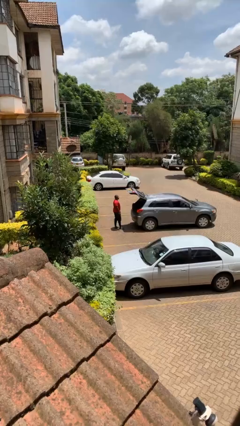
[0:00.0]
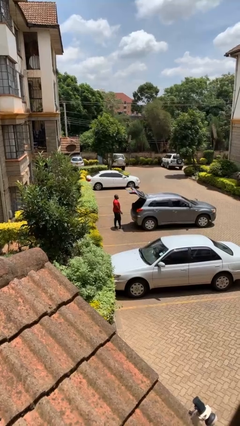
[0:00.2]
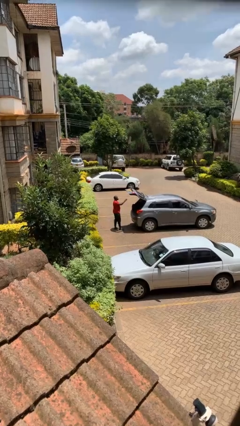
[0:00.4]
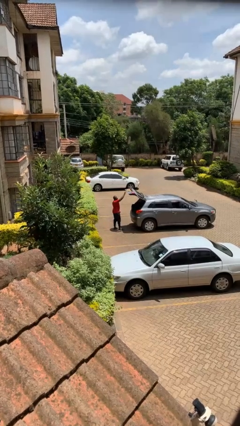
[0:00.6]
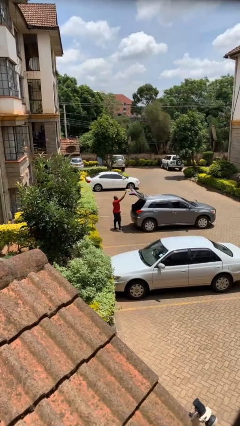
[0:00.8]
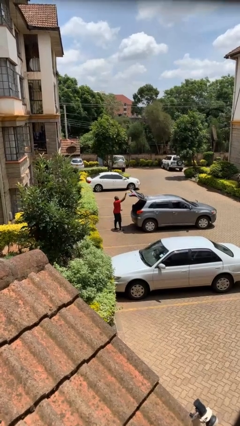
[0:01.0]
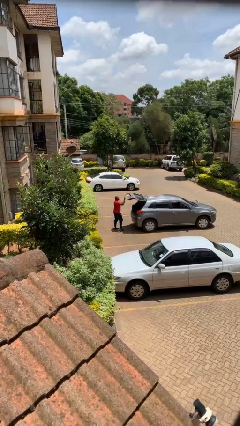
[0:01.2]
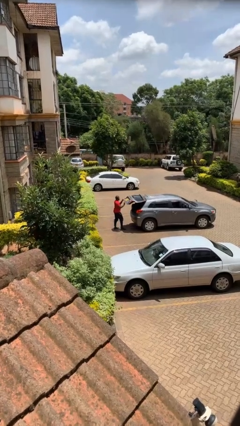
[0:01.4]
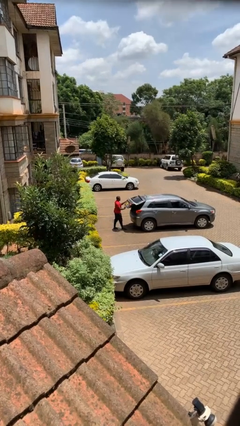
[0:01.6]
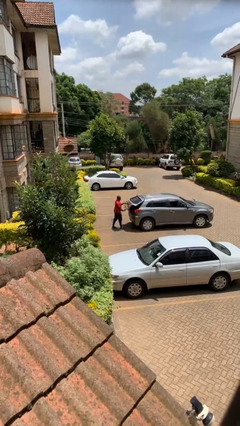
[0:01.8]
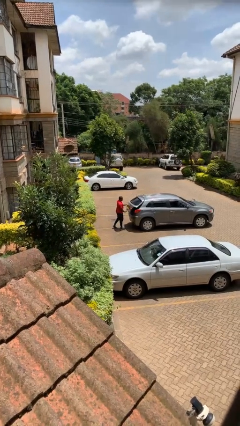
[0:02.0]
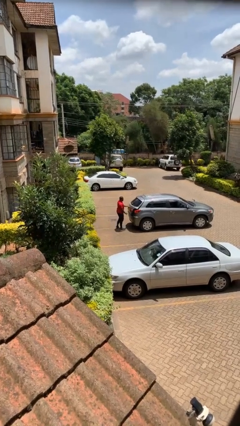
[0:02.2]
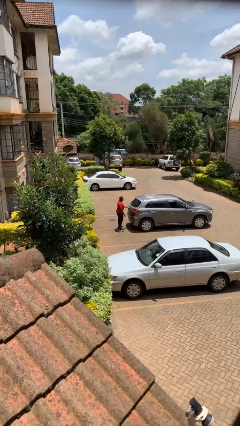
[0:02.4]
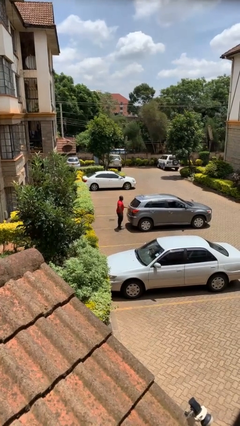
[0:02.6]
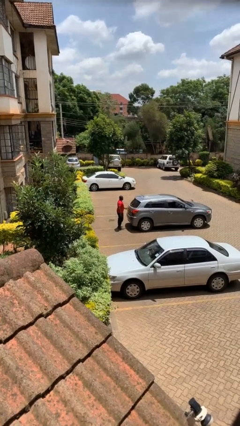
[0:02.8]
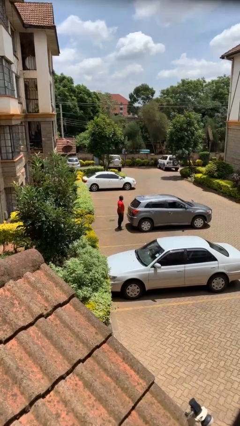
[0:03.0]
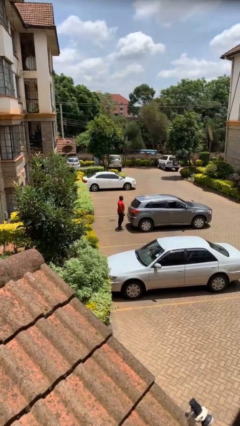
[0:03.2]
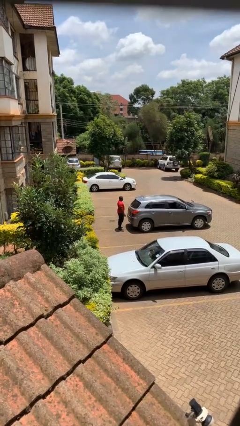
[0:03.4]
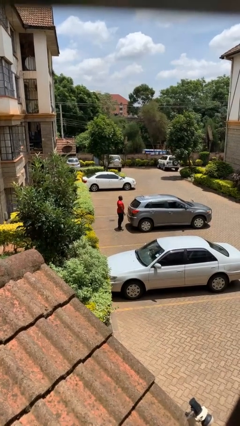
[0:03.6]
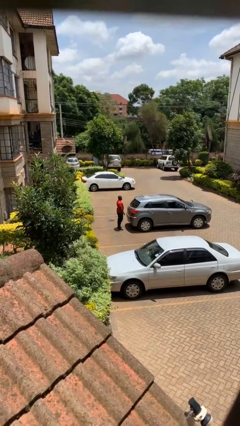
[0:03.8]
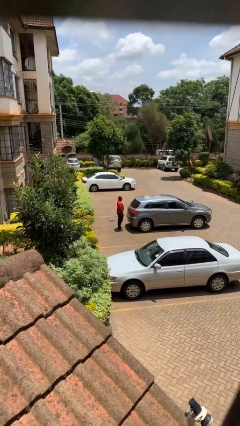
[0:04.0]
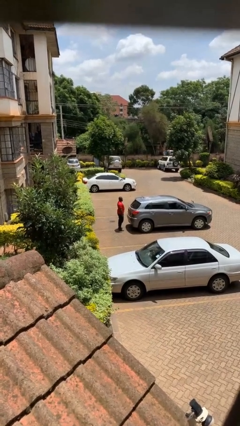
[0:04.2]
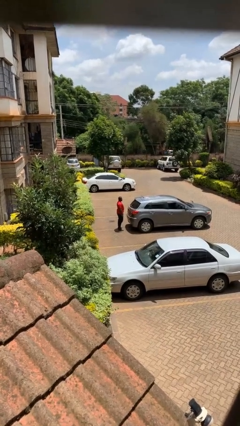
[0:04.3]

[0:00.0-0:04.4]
person closes car trunk

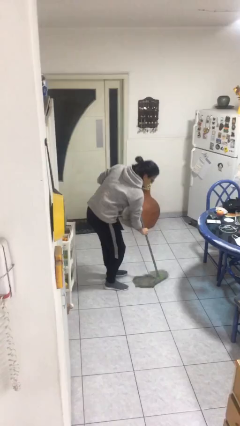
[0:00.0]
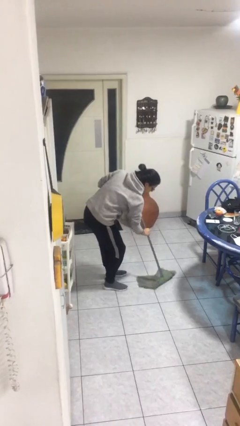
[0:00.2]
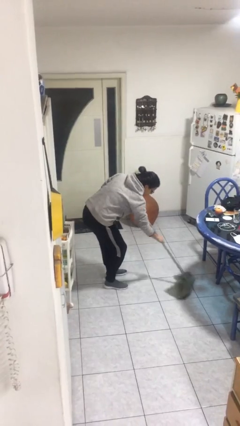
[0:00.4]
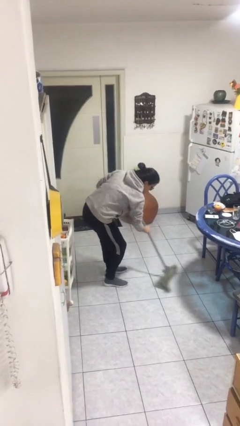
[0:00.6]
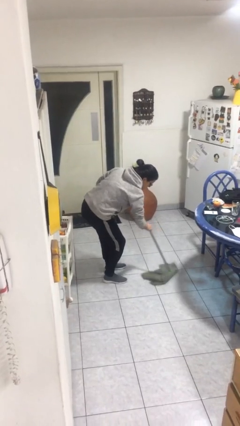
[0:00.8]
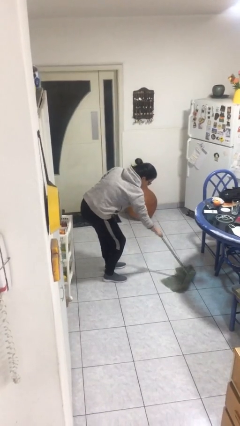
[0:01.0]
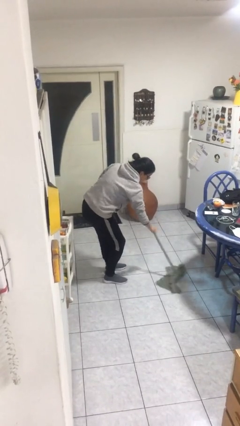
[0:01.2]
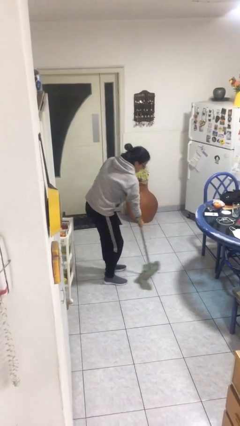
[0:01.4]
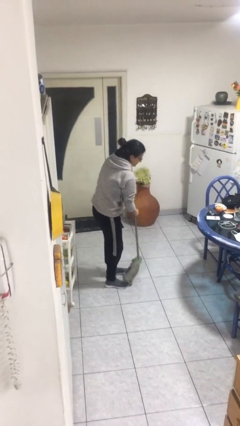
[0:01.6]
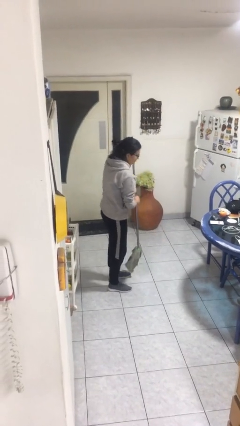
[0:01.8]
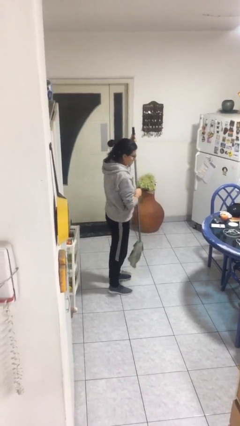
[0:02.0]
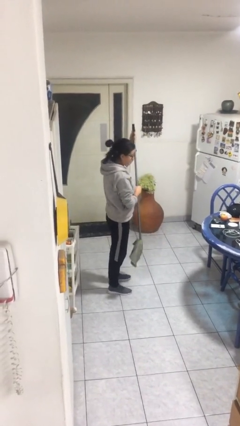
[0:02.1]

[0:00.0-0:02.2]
person sweeps floor

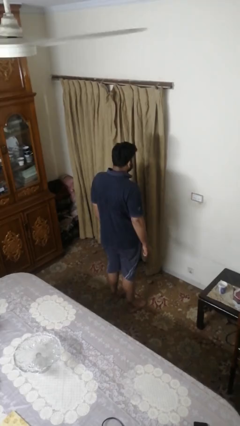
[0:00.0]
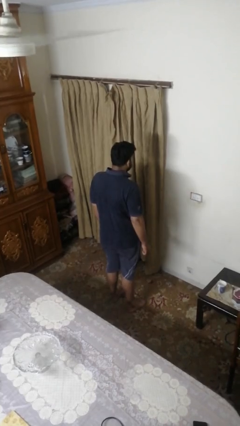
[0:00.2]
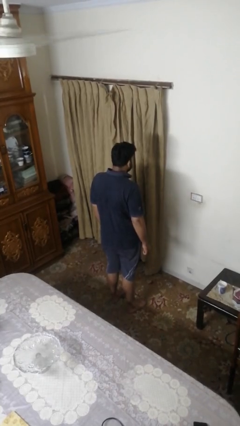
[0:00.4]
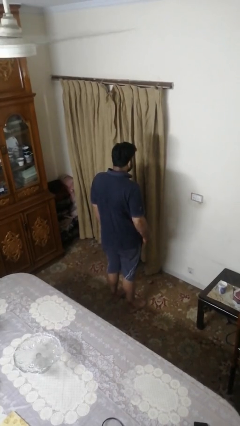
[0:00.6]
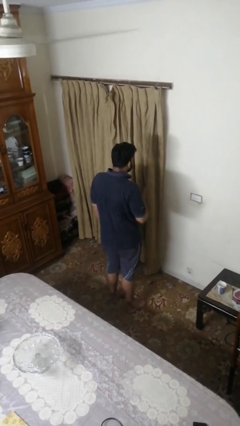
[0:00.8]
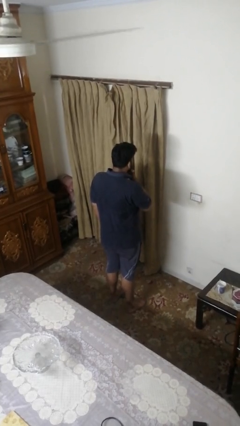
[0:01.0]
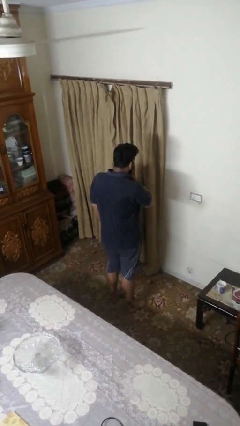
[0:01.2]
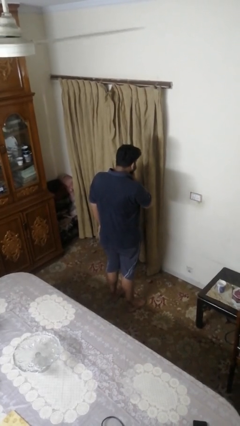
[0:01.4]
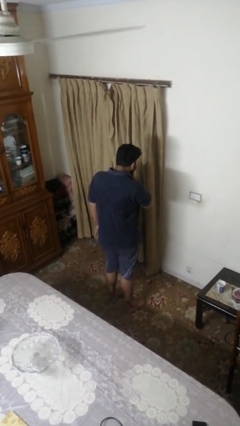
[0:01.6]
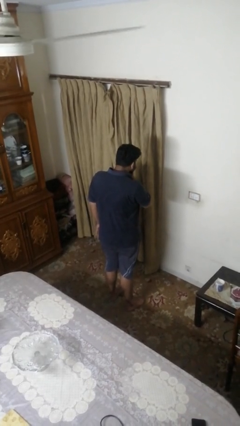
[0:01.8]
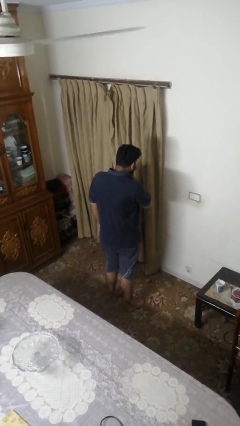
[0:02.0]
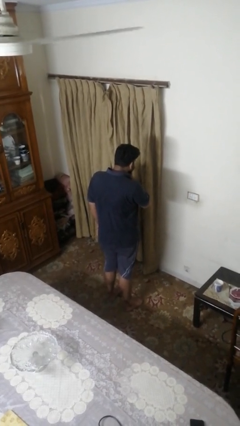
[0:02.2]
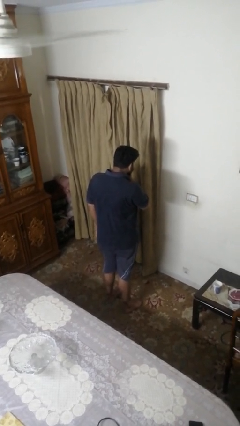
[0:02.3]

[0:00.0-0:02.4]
person strokes chin

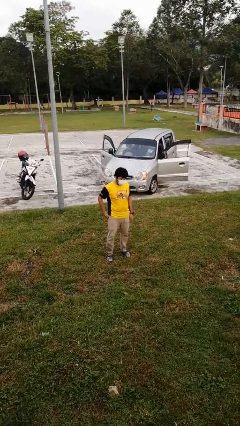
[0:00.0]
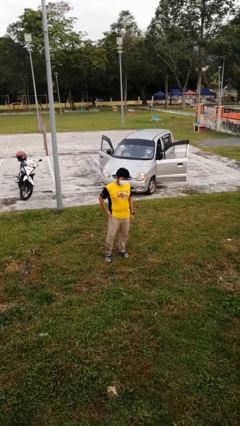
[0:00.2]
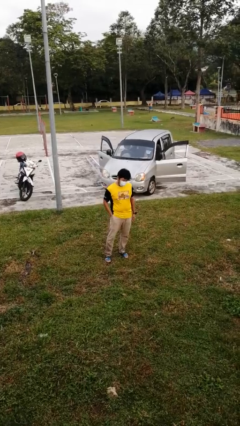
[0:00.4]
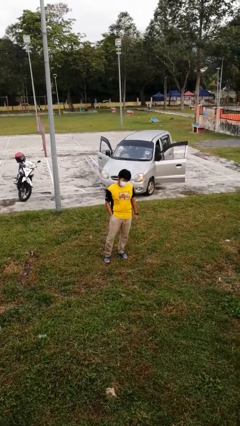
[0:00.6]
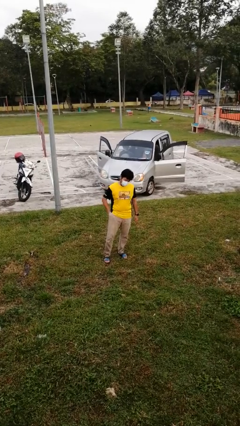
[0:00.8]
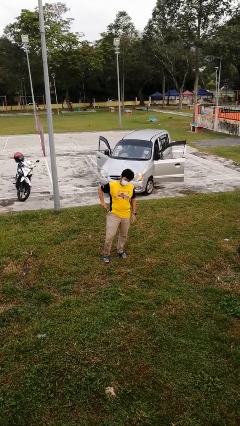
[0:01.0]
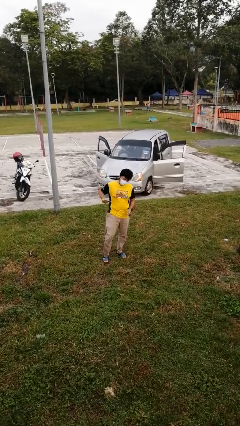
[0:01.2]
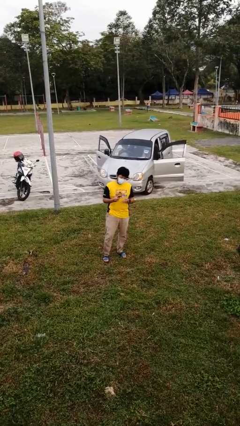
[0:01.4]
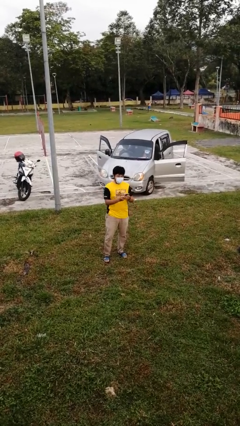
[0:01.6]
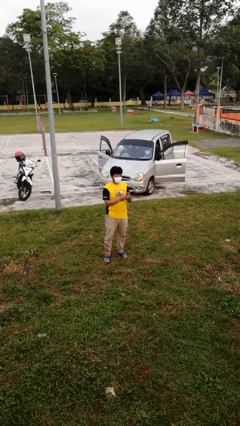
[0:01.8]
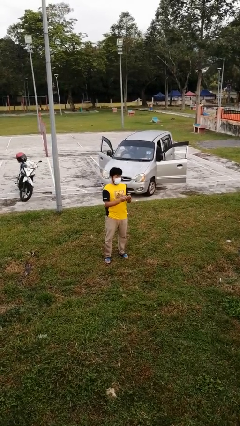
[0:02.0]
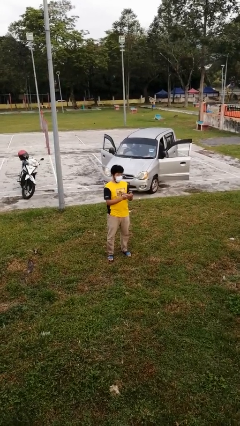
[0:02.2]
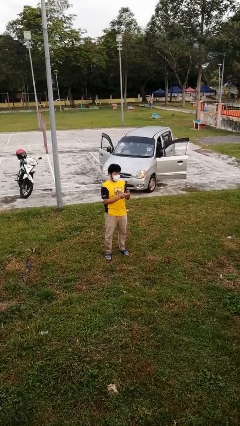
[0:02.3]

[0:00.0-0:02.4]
person takes phone from pocket

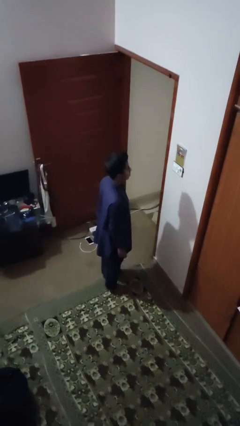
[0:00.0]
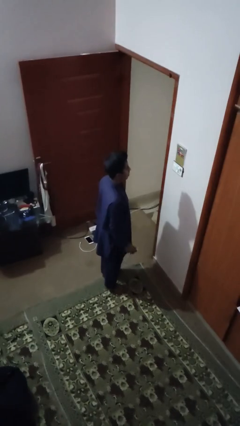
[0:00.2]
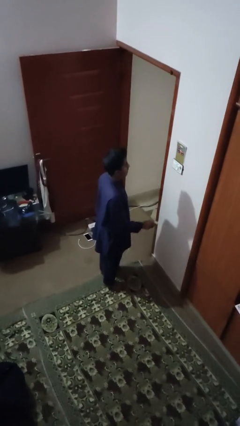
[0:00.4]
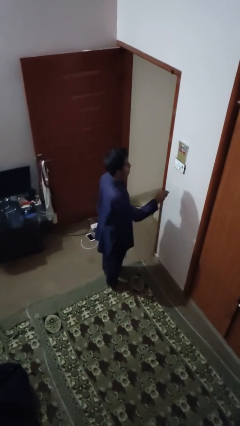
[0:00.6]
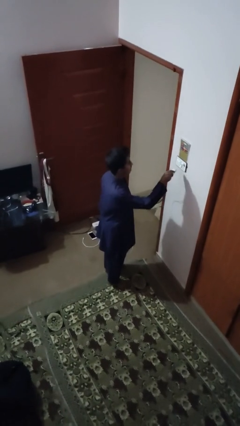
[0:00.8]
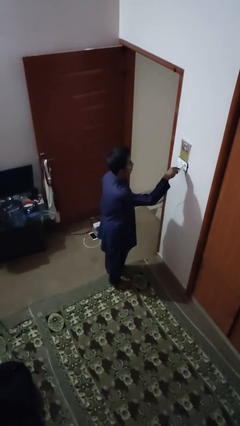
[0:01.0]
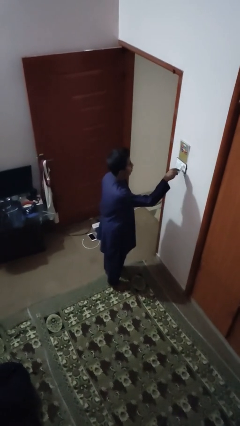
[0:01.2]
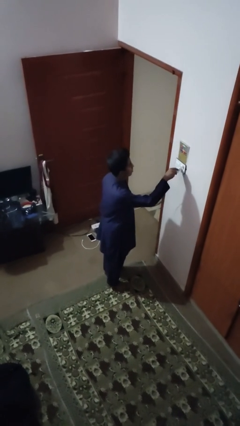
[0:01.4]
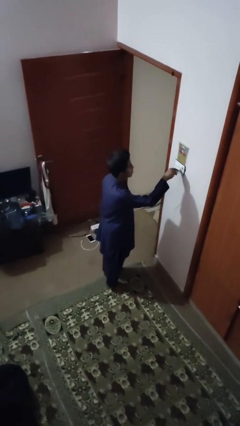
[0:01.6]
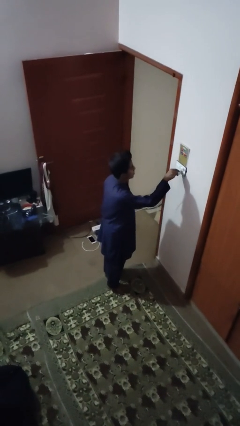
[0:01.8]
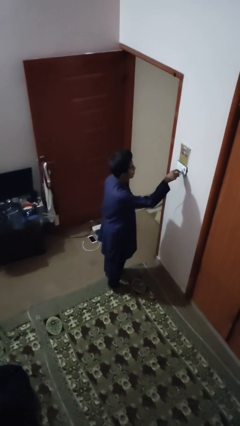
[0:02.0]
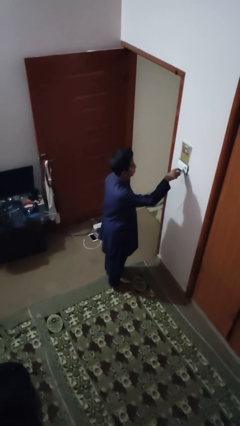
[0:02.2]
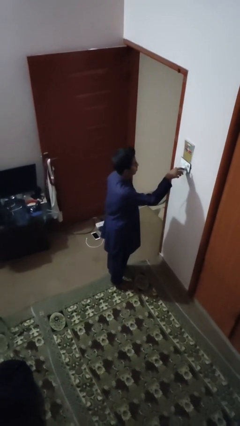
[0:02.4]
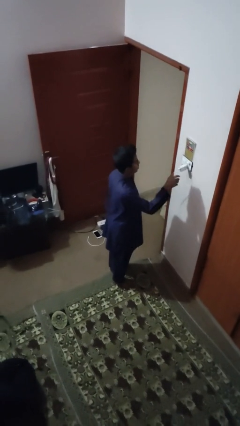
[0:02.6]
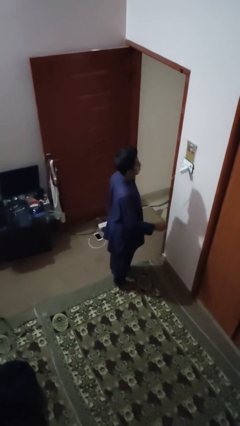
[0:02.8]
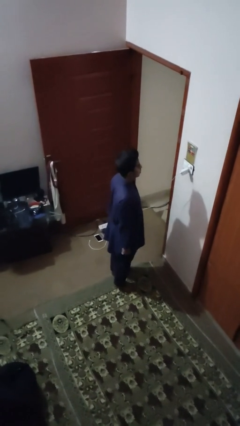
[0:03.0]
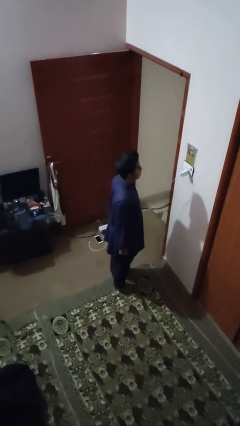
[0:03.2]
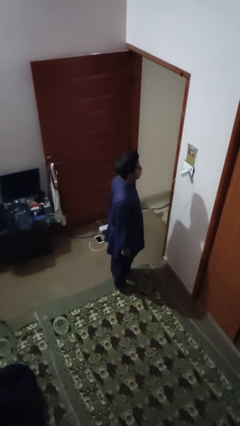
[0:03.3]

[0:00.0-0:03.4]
person plugs into electrical socket

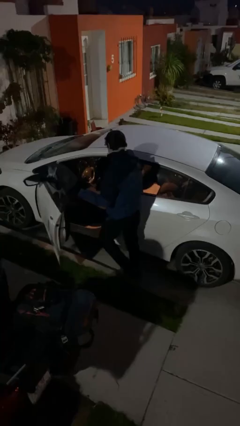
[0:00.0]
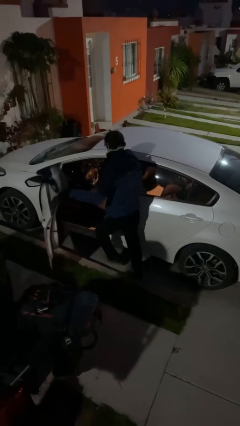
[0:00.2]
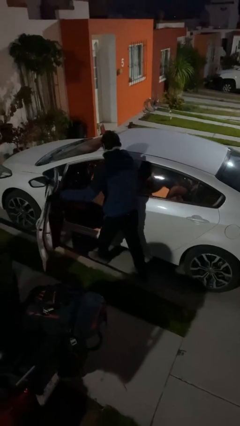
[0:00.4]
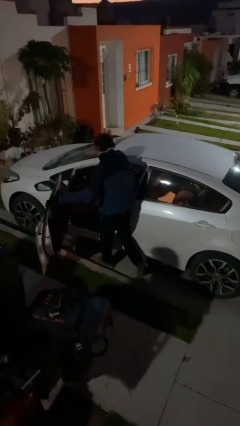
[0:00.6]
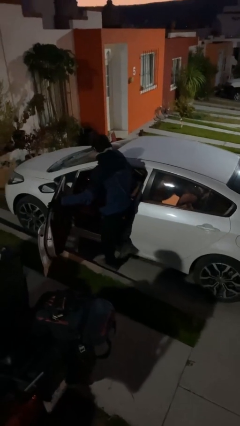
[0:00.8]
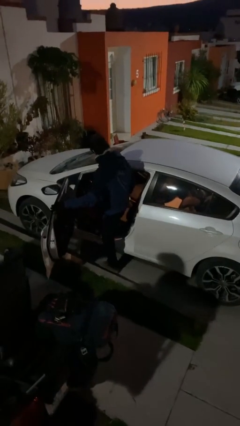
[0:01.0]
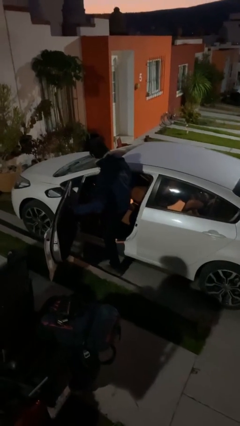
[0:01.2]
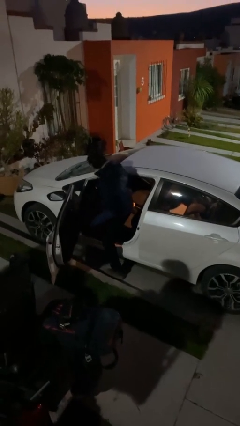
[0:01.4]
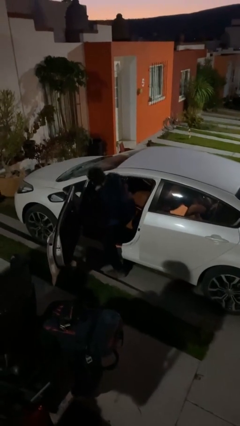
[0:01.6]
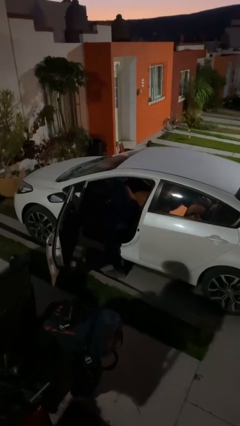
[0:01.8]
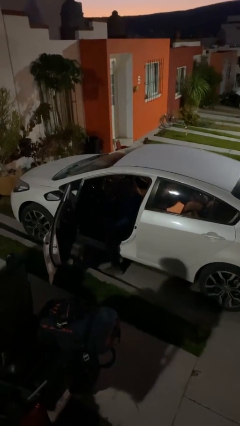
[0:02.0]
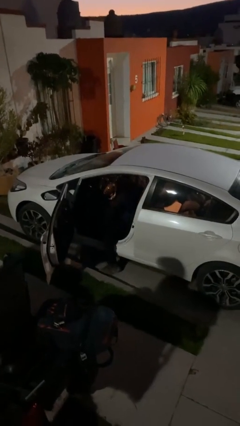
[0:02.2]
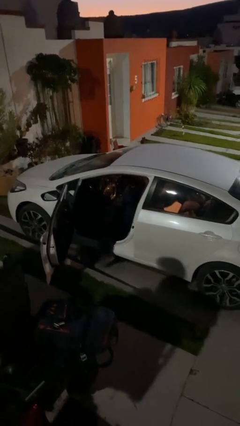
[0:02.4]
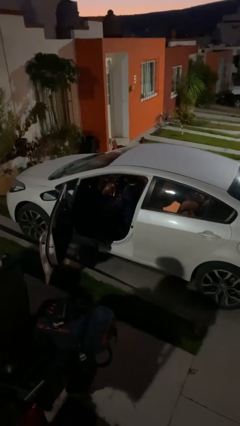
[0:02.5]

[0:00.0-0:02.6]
person enters car
